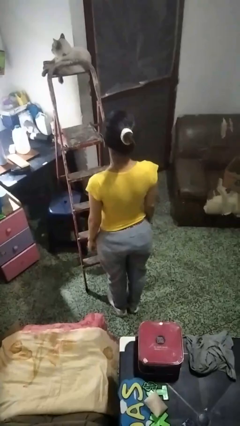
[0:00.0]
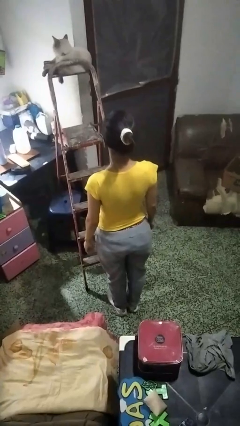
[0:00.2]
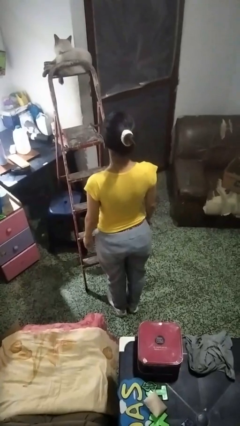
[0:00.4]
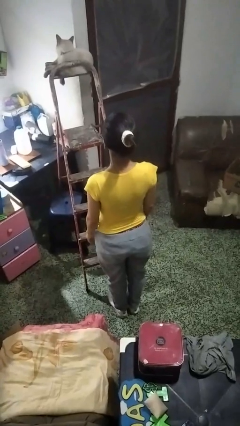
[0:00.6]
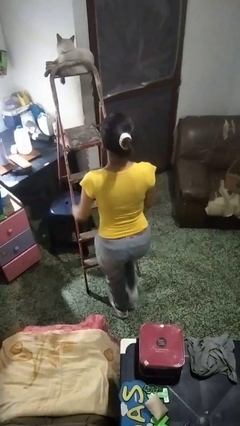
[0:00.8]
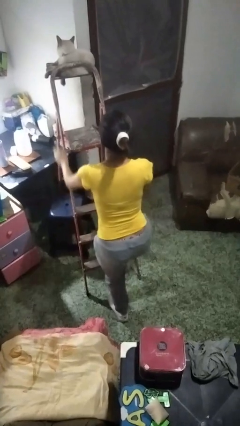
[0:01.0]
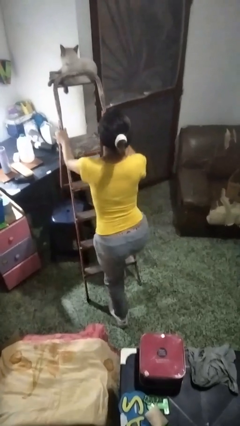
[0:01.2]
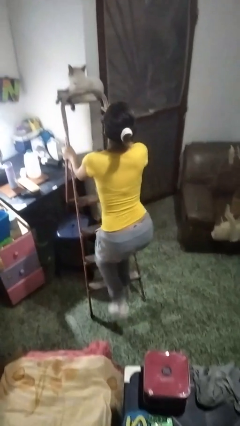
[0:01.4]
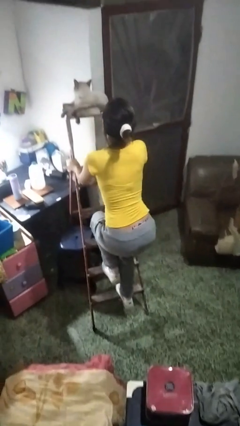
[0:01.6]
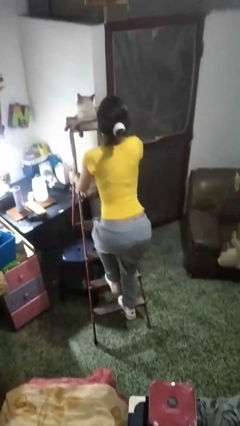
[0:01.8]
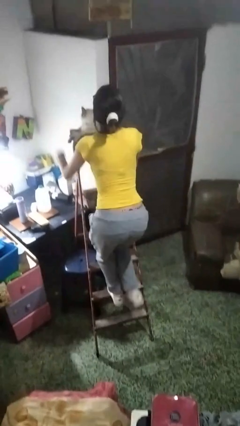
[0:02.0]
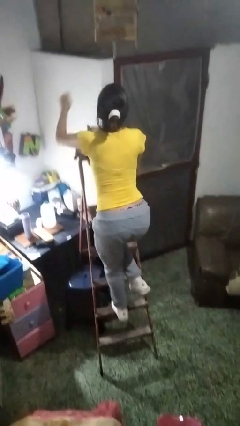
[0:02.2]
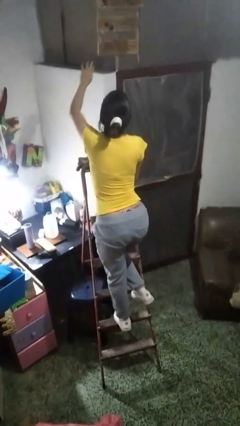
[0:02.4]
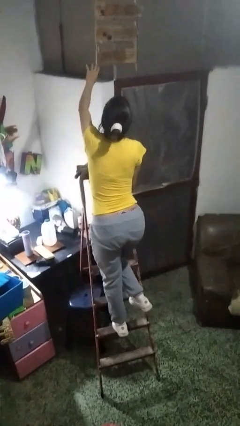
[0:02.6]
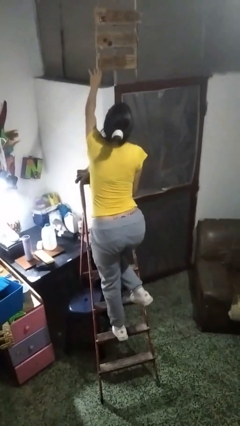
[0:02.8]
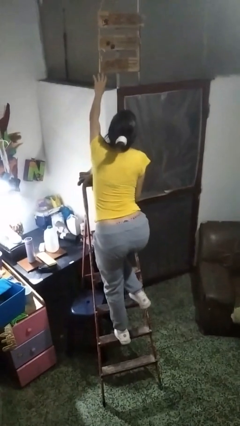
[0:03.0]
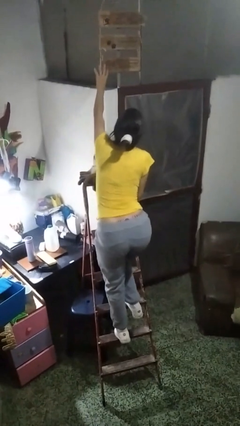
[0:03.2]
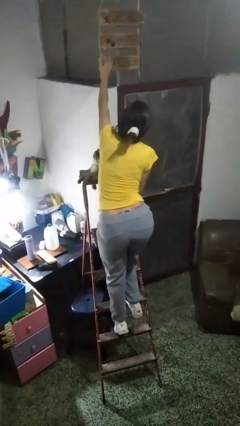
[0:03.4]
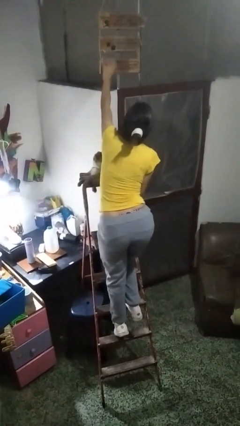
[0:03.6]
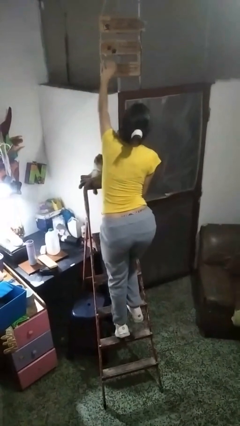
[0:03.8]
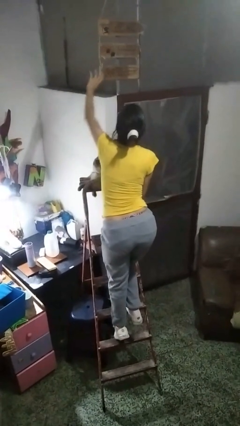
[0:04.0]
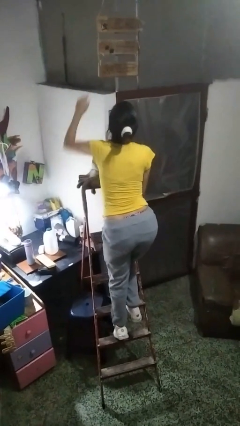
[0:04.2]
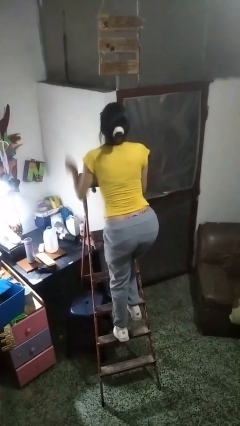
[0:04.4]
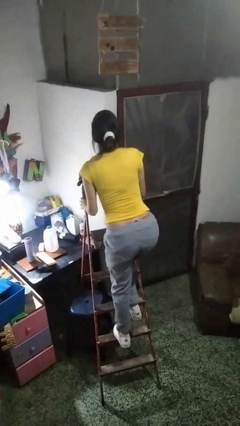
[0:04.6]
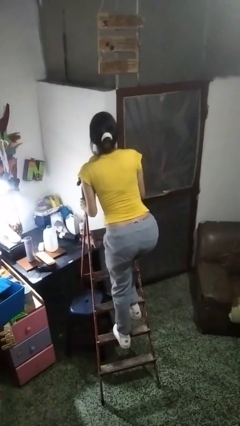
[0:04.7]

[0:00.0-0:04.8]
person climbs up ladder

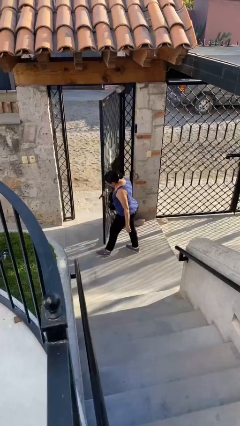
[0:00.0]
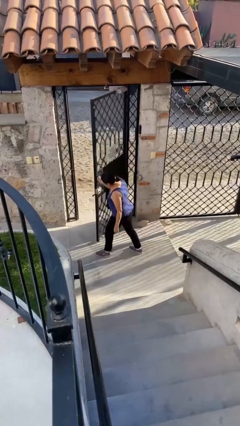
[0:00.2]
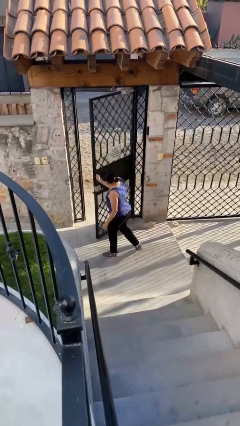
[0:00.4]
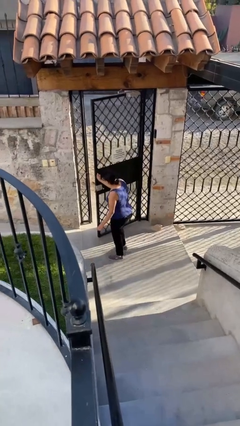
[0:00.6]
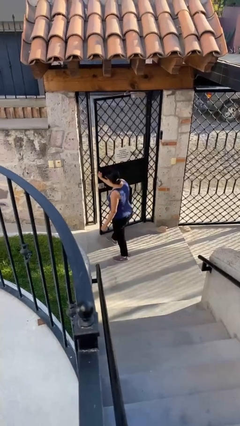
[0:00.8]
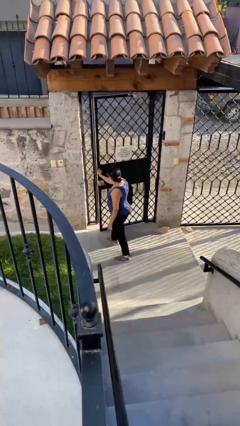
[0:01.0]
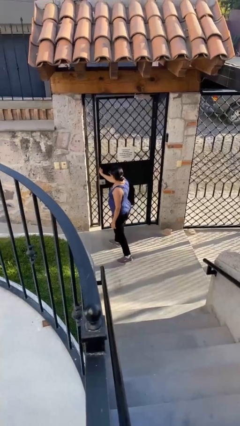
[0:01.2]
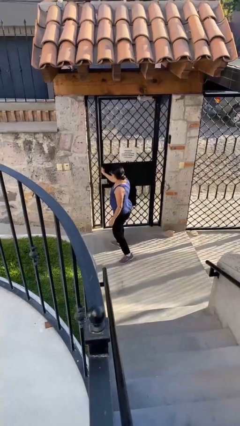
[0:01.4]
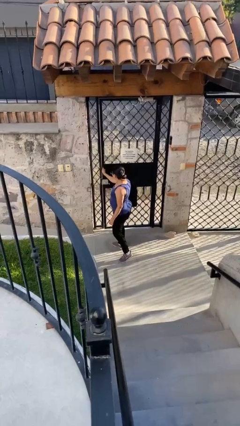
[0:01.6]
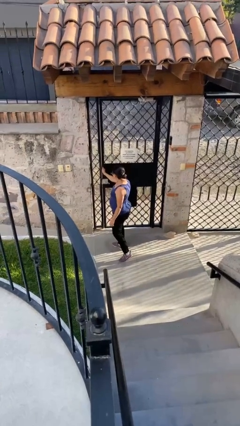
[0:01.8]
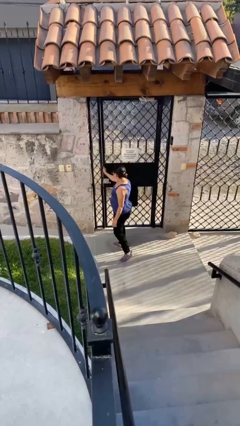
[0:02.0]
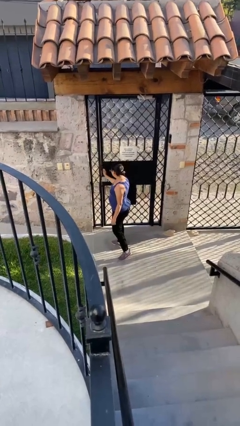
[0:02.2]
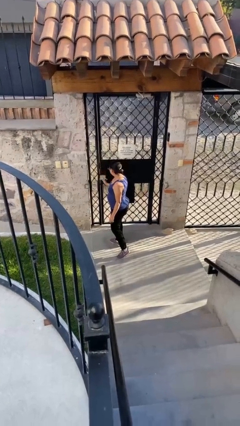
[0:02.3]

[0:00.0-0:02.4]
person closes facility door

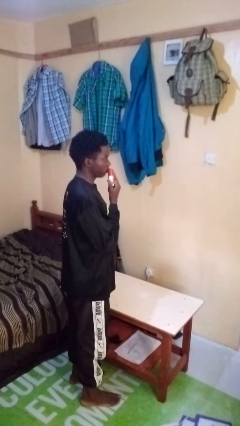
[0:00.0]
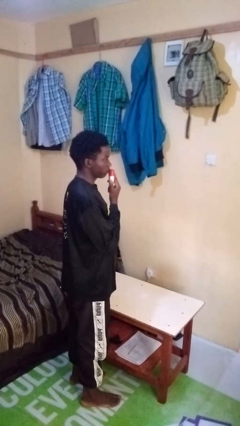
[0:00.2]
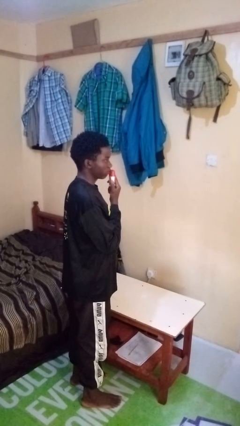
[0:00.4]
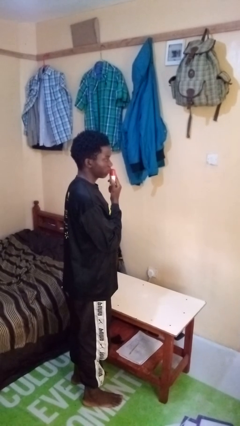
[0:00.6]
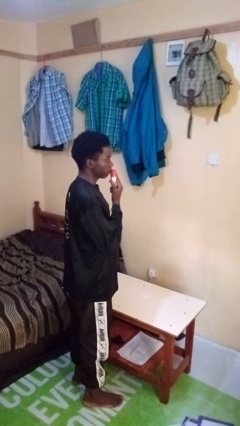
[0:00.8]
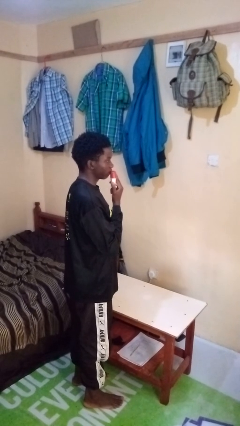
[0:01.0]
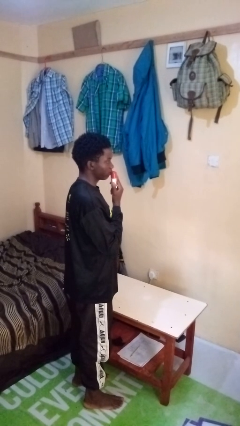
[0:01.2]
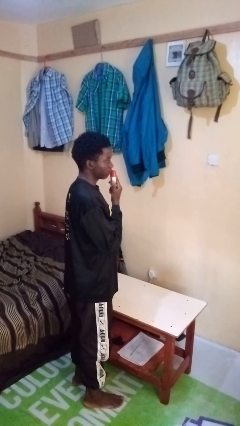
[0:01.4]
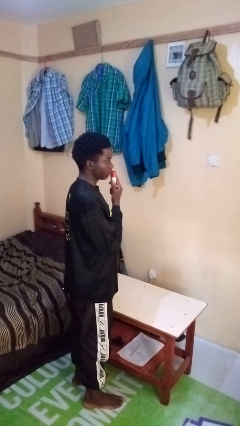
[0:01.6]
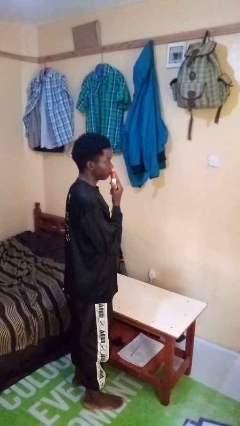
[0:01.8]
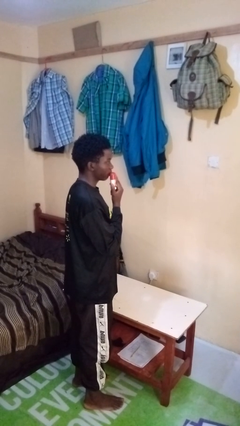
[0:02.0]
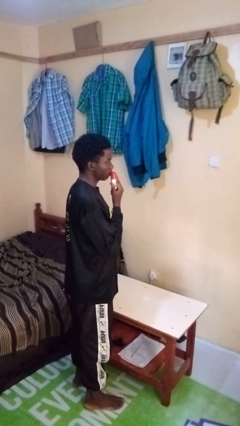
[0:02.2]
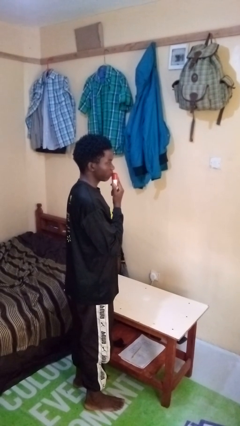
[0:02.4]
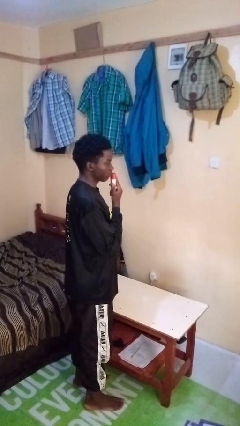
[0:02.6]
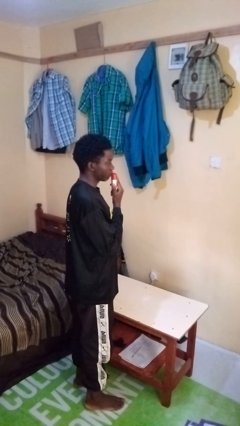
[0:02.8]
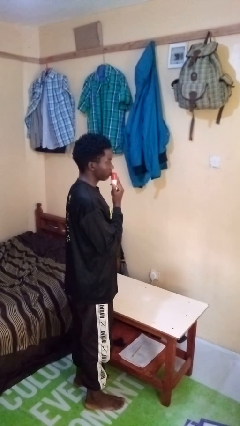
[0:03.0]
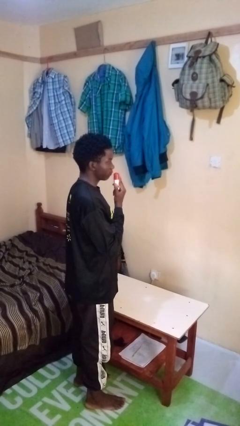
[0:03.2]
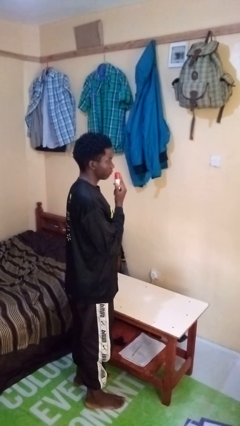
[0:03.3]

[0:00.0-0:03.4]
person applies lip makeup

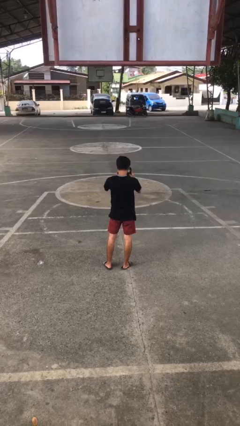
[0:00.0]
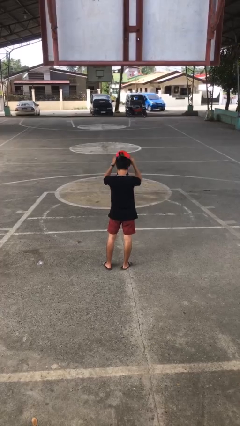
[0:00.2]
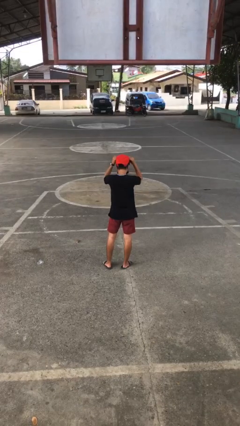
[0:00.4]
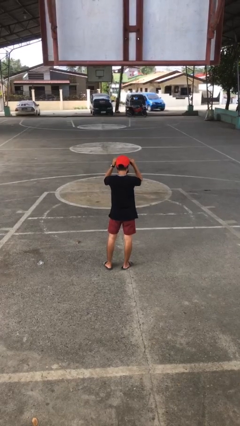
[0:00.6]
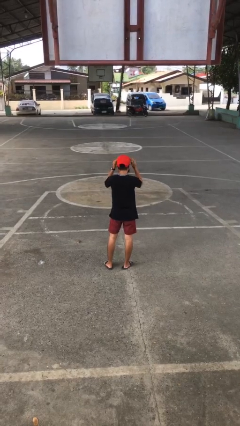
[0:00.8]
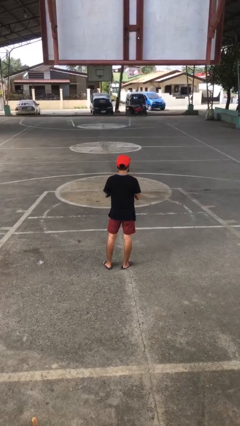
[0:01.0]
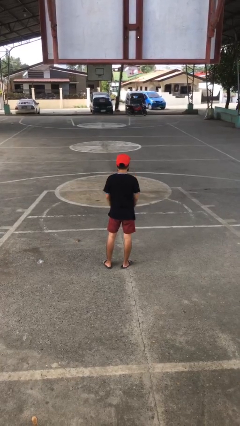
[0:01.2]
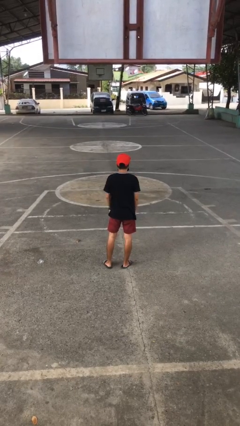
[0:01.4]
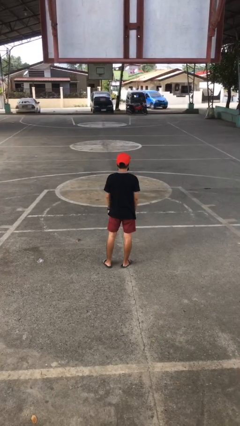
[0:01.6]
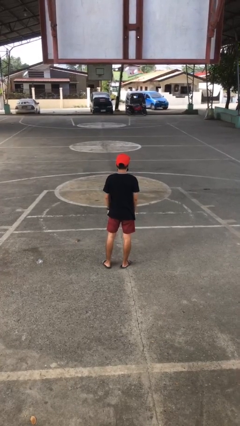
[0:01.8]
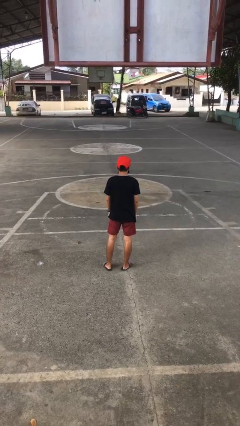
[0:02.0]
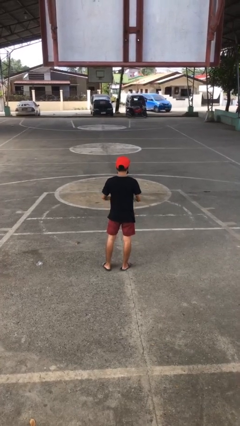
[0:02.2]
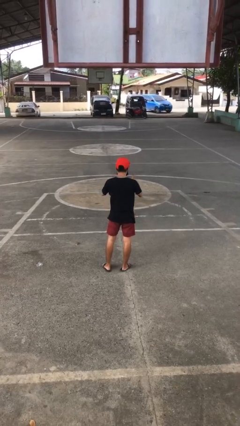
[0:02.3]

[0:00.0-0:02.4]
person puts on hat

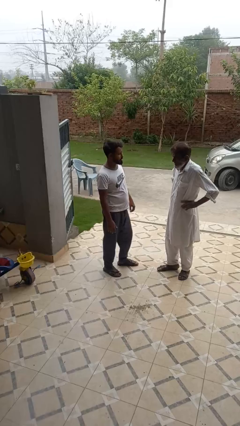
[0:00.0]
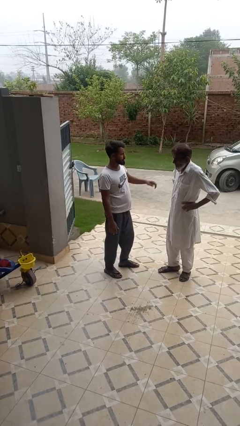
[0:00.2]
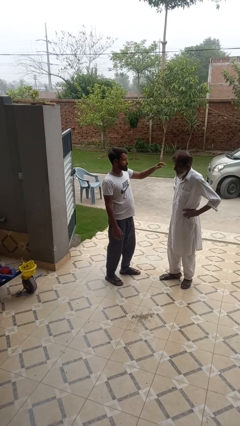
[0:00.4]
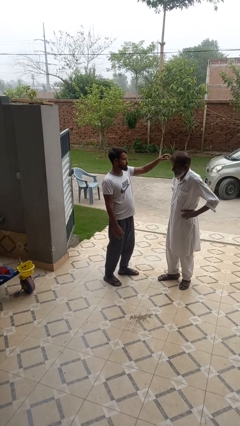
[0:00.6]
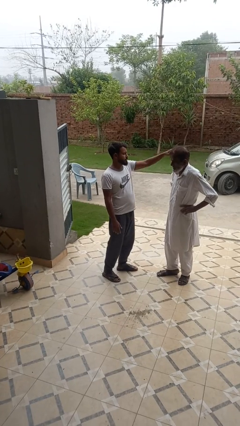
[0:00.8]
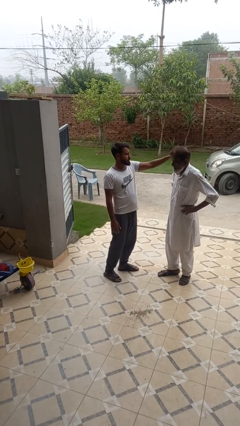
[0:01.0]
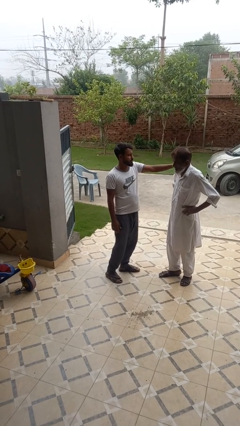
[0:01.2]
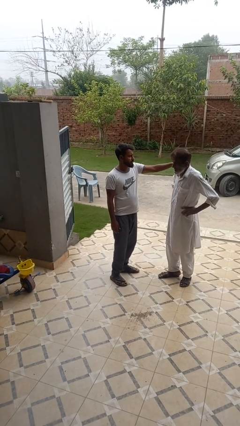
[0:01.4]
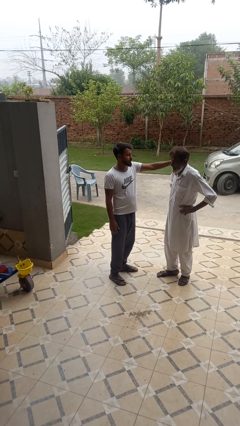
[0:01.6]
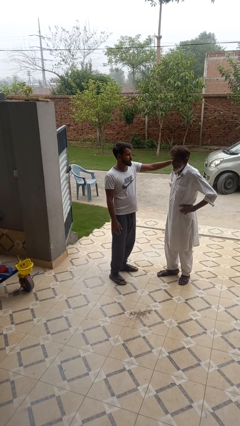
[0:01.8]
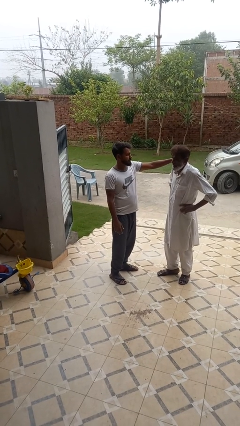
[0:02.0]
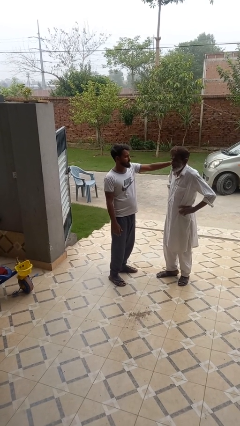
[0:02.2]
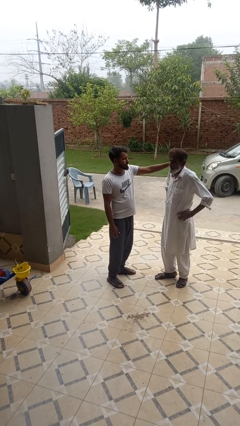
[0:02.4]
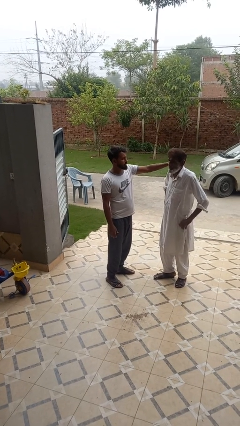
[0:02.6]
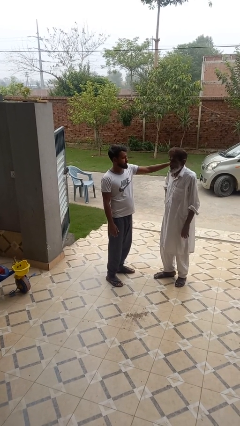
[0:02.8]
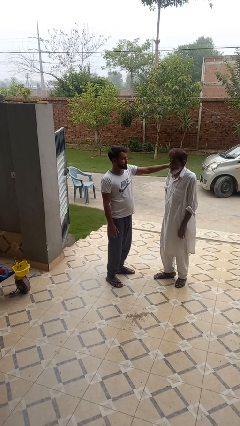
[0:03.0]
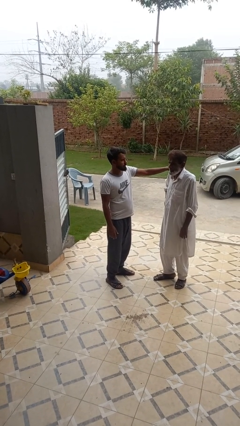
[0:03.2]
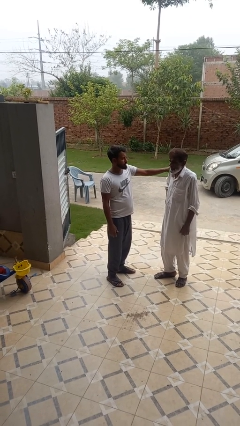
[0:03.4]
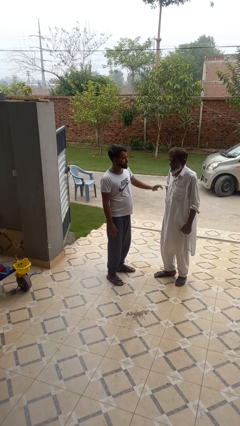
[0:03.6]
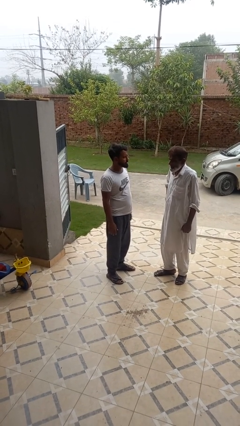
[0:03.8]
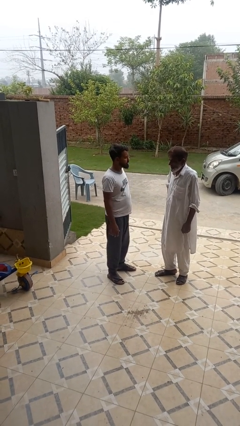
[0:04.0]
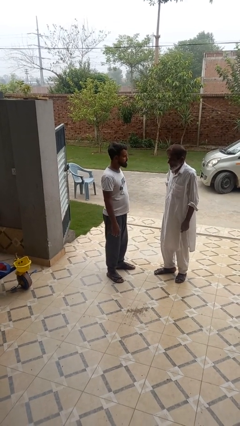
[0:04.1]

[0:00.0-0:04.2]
person pounds shoulders of person

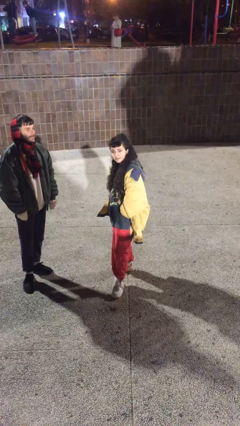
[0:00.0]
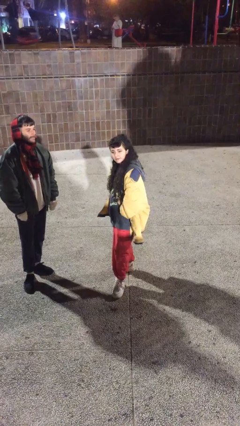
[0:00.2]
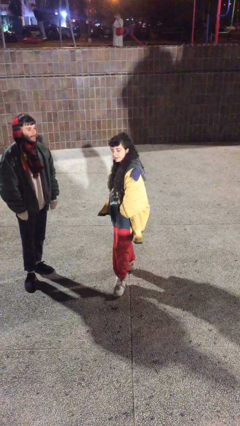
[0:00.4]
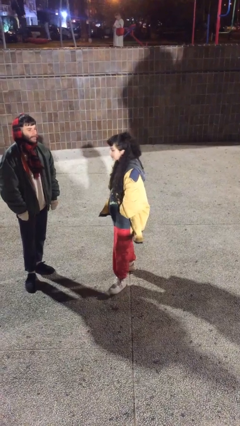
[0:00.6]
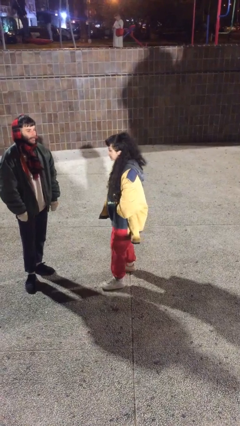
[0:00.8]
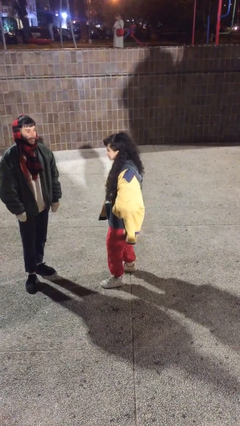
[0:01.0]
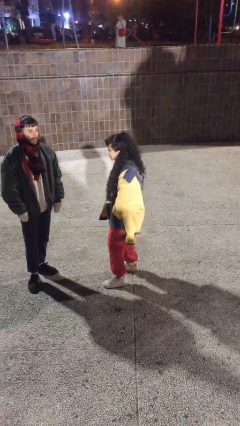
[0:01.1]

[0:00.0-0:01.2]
person grabs person by forearm
